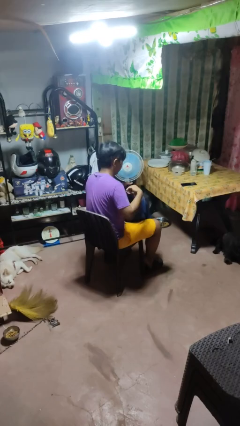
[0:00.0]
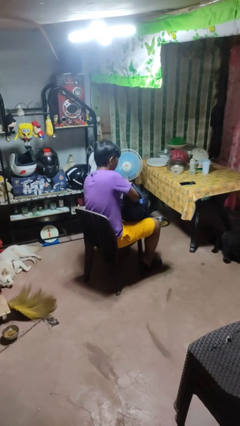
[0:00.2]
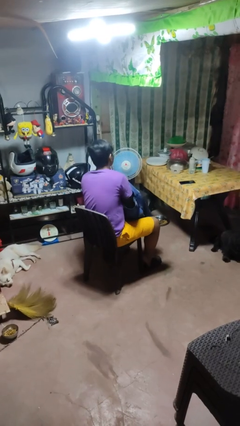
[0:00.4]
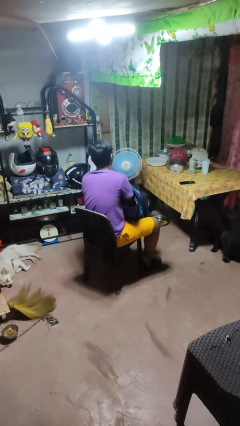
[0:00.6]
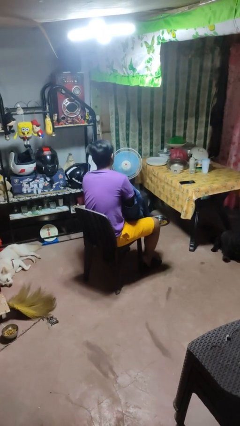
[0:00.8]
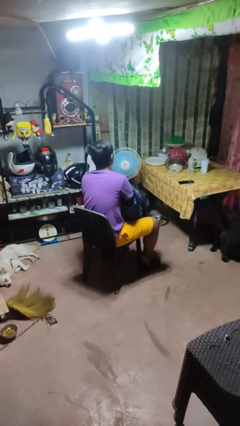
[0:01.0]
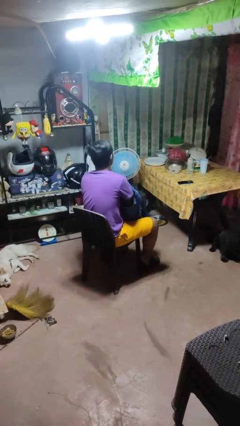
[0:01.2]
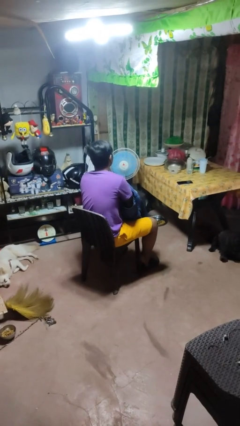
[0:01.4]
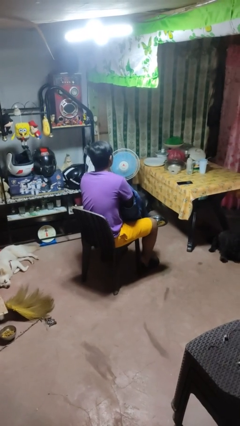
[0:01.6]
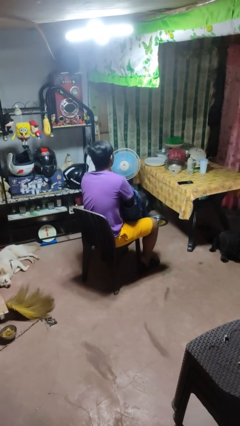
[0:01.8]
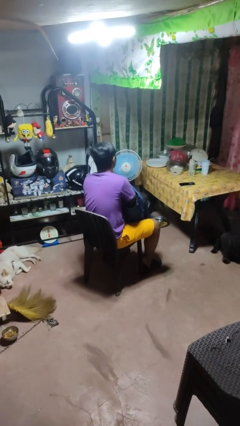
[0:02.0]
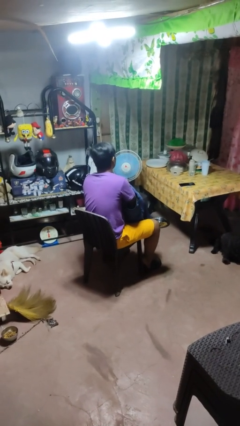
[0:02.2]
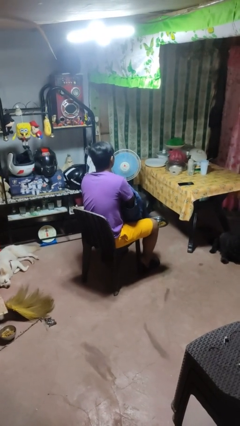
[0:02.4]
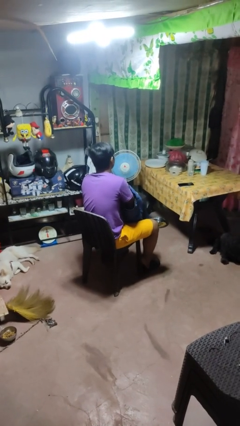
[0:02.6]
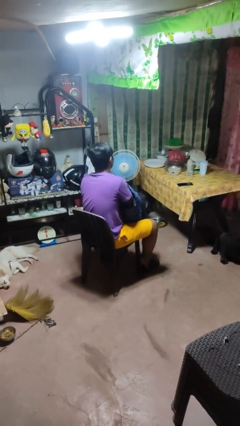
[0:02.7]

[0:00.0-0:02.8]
person searches in backpack

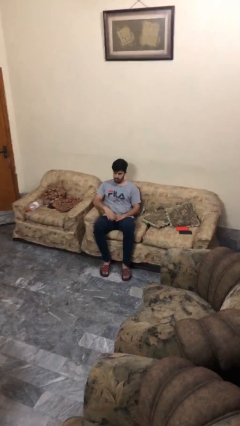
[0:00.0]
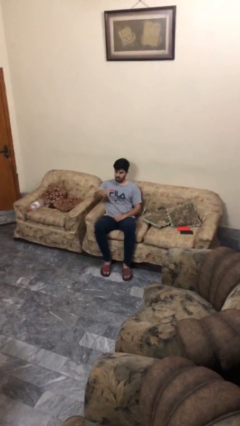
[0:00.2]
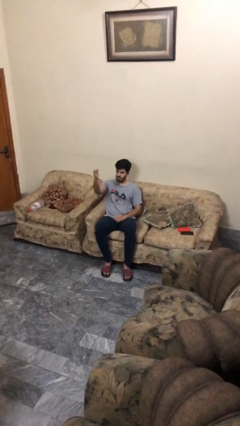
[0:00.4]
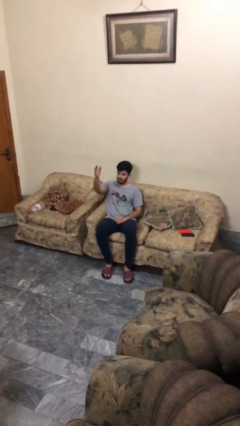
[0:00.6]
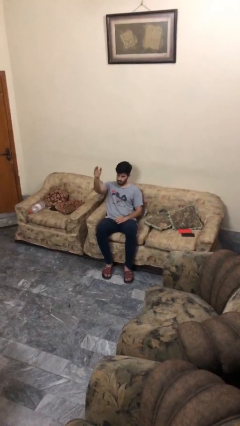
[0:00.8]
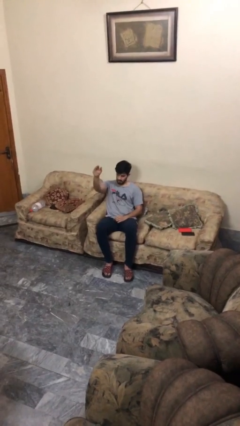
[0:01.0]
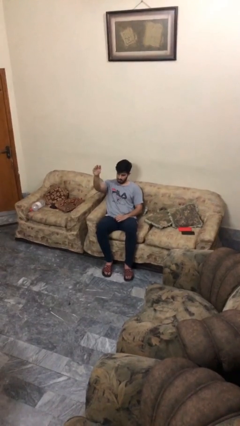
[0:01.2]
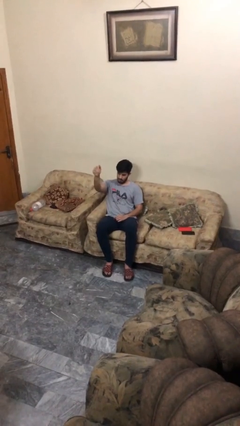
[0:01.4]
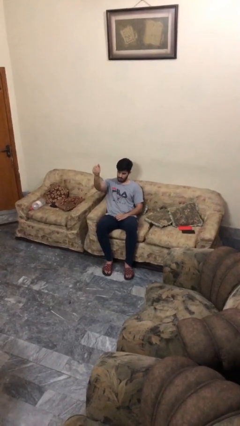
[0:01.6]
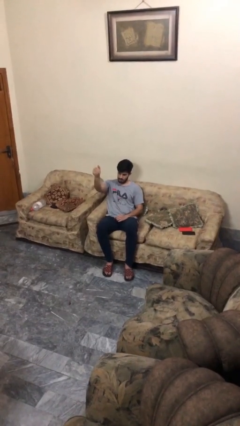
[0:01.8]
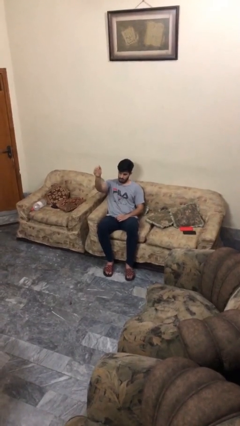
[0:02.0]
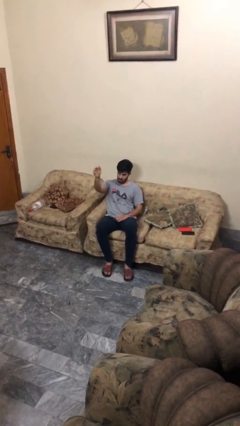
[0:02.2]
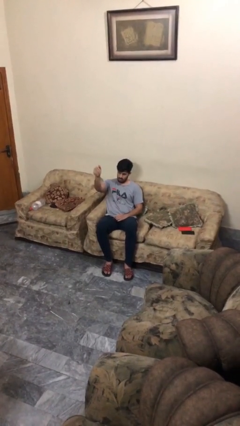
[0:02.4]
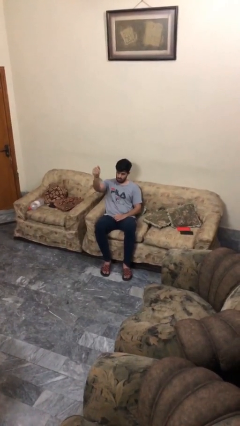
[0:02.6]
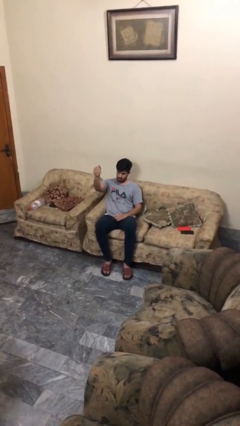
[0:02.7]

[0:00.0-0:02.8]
person gestures come here

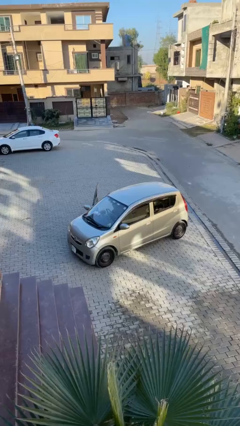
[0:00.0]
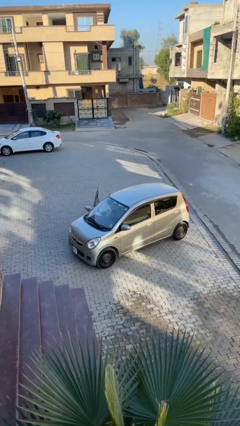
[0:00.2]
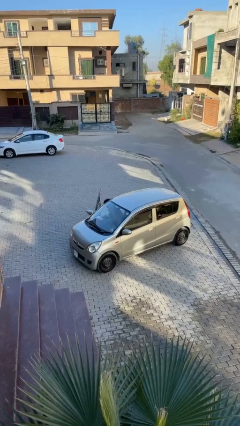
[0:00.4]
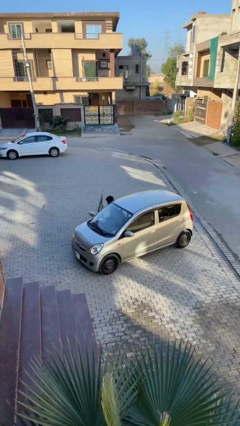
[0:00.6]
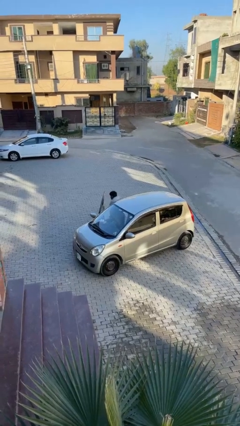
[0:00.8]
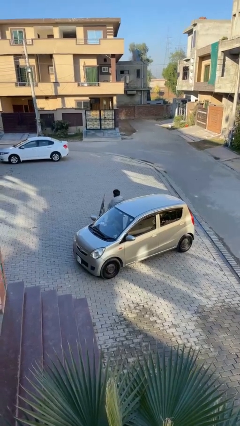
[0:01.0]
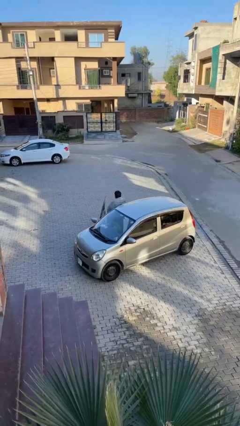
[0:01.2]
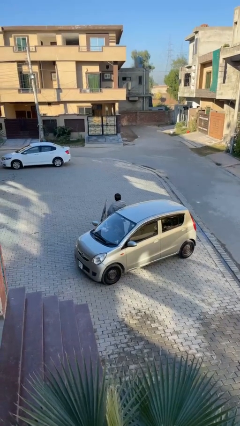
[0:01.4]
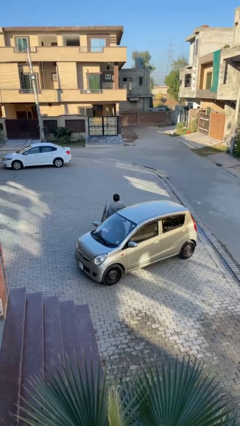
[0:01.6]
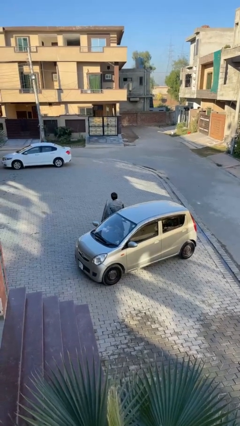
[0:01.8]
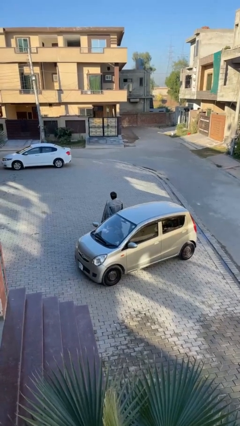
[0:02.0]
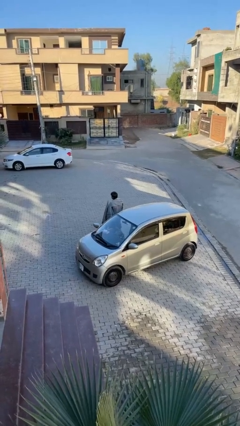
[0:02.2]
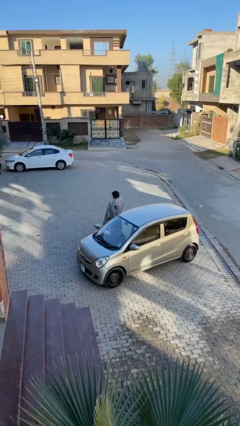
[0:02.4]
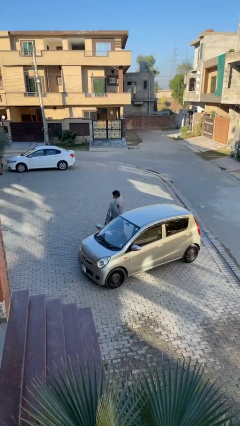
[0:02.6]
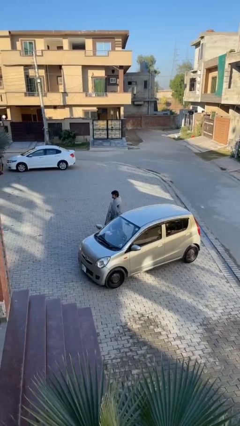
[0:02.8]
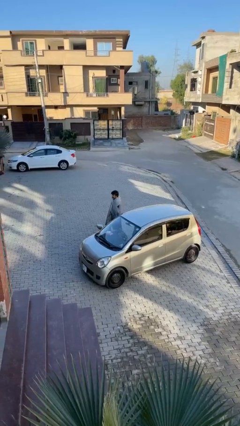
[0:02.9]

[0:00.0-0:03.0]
person exits car

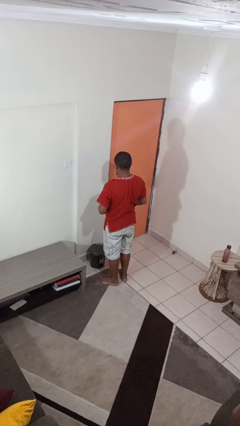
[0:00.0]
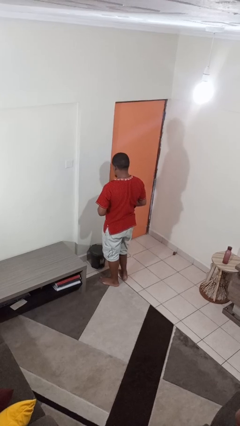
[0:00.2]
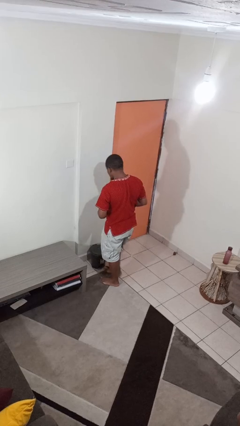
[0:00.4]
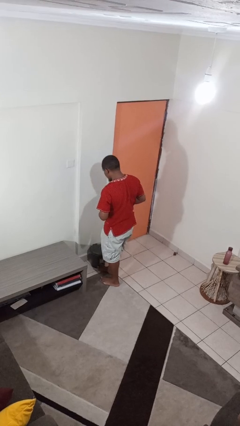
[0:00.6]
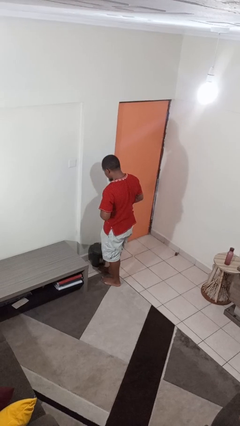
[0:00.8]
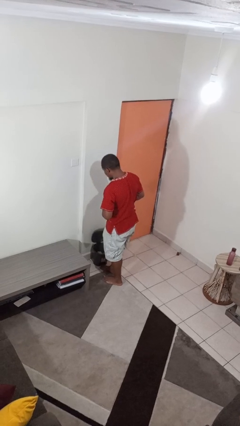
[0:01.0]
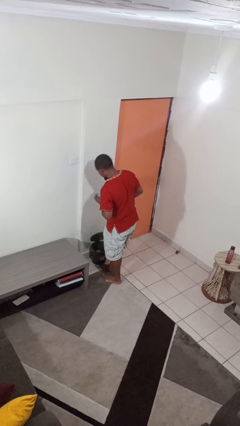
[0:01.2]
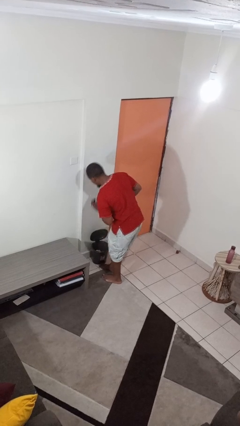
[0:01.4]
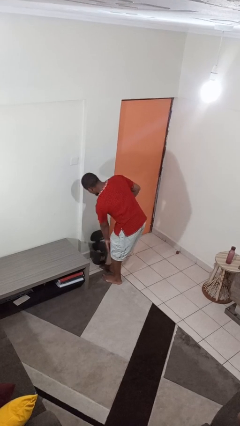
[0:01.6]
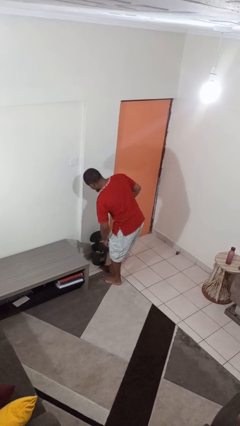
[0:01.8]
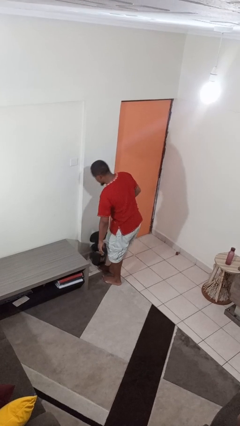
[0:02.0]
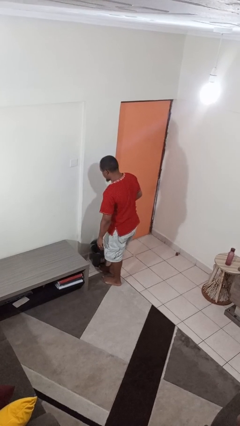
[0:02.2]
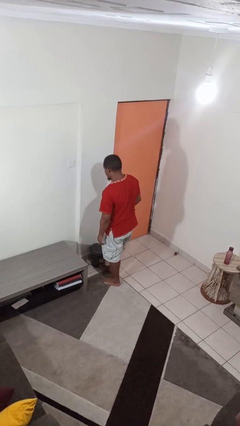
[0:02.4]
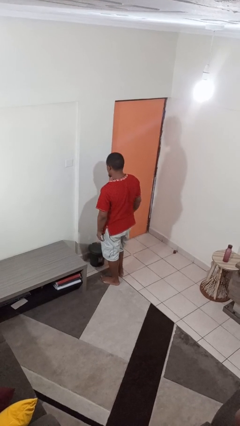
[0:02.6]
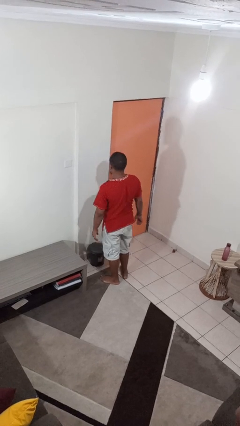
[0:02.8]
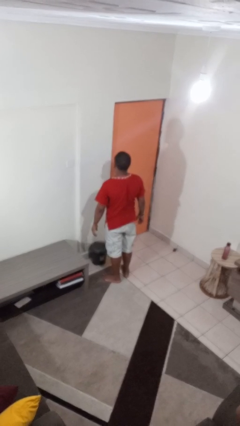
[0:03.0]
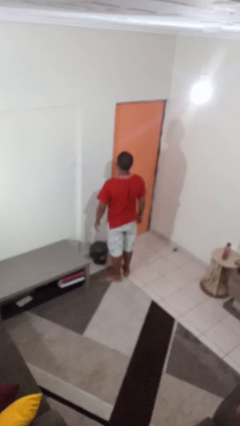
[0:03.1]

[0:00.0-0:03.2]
person discards trash

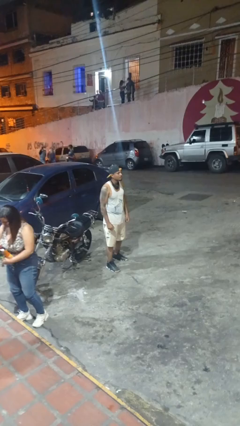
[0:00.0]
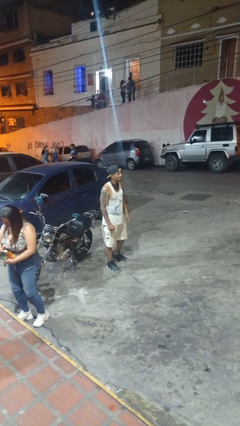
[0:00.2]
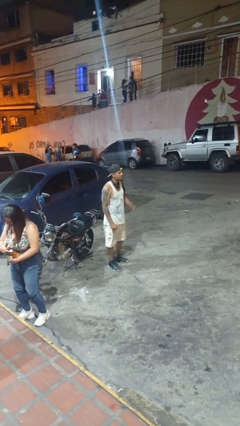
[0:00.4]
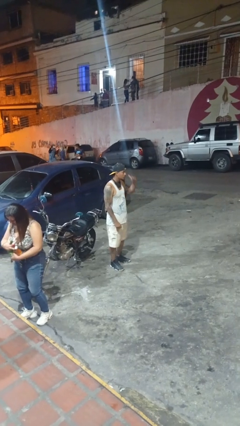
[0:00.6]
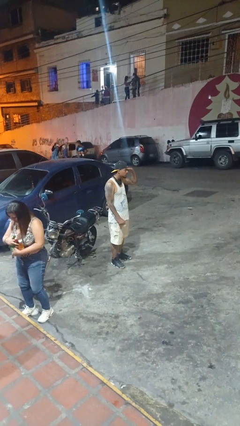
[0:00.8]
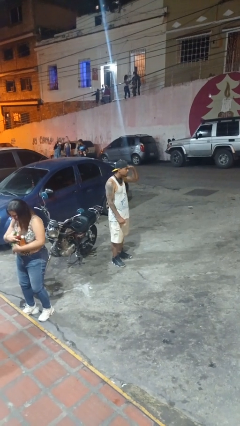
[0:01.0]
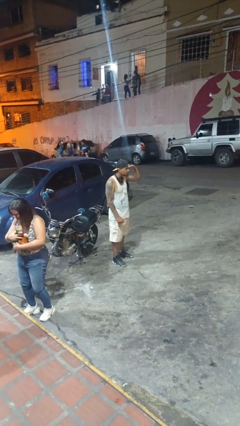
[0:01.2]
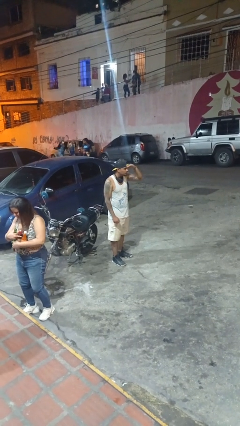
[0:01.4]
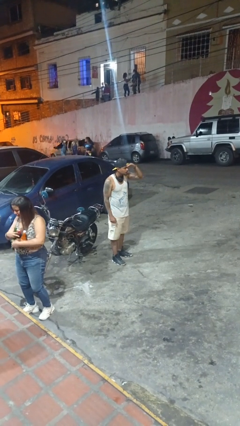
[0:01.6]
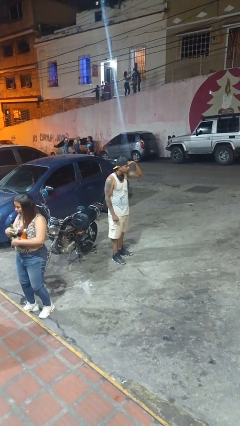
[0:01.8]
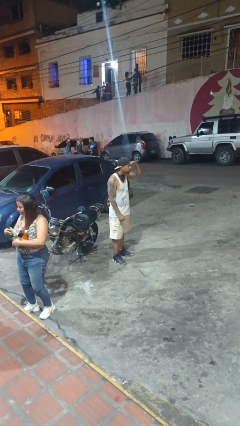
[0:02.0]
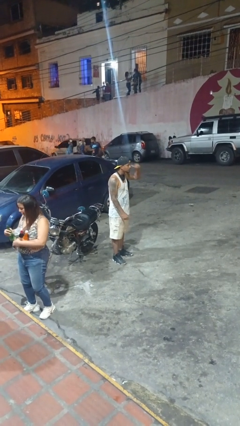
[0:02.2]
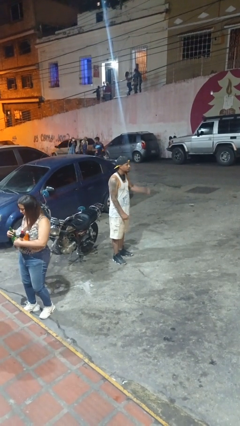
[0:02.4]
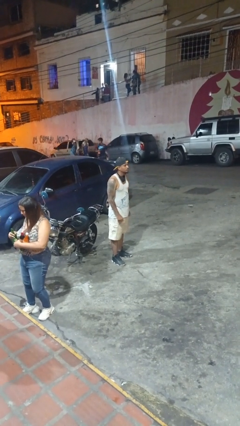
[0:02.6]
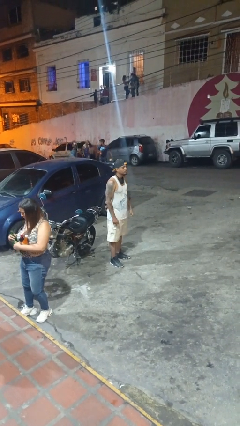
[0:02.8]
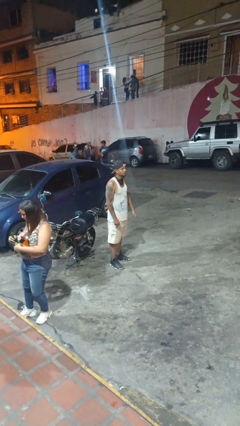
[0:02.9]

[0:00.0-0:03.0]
person shades eyes

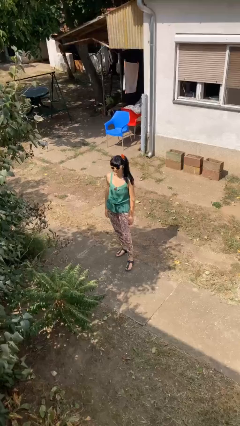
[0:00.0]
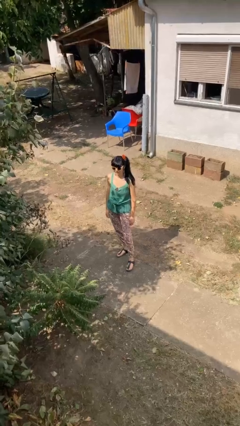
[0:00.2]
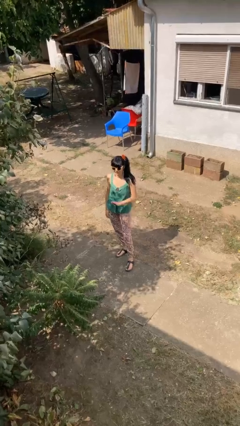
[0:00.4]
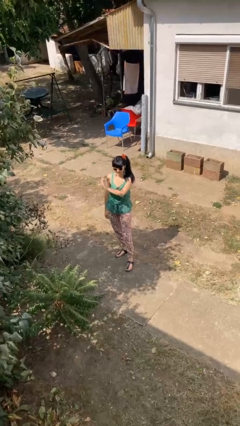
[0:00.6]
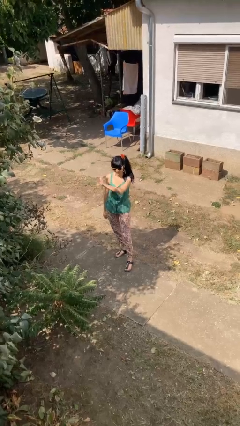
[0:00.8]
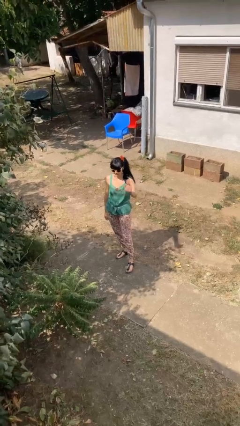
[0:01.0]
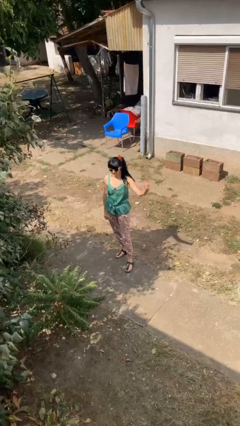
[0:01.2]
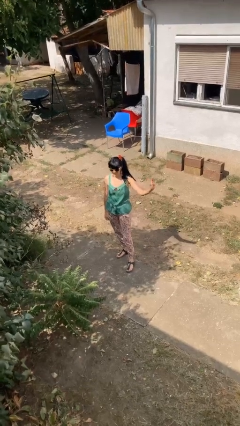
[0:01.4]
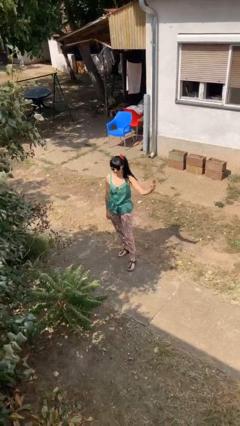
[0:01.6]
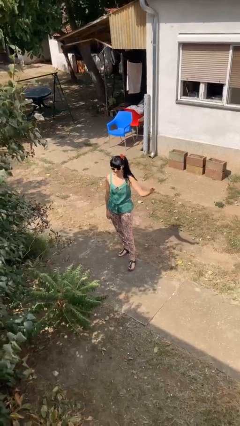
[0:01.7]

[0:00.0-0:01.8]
person gestures swipe left

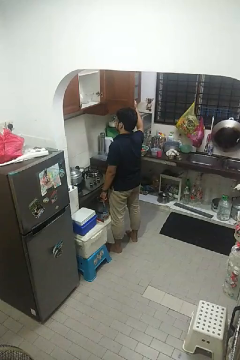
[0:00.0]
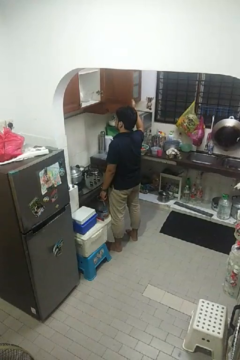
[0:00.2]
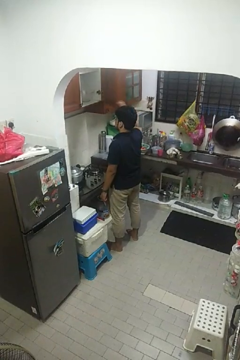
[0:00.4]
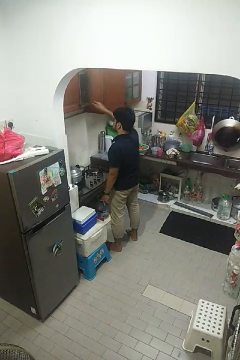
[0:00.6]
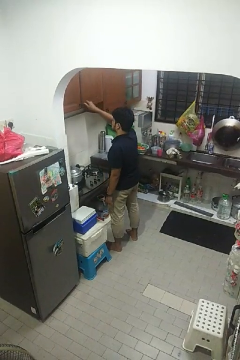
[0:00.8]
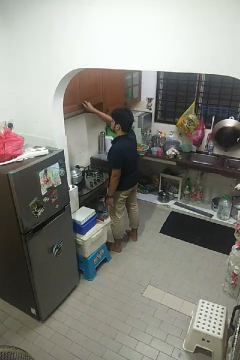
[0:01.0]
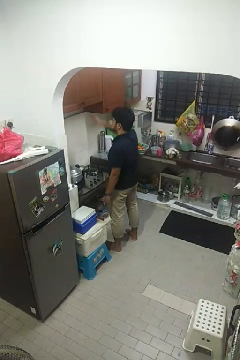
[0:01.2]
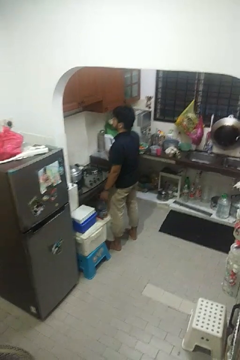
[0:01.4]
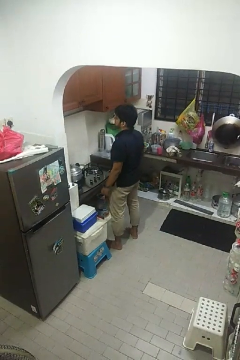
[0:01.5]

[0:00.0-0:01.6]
person closes cabinet
